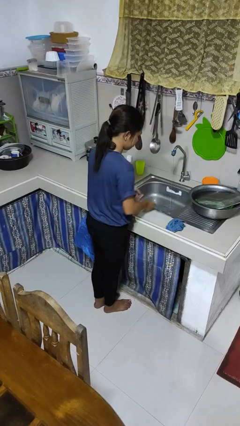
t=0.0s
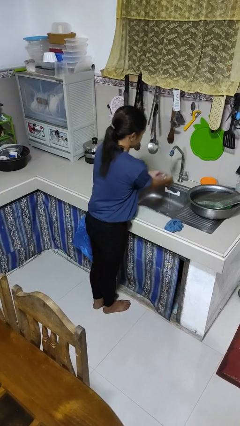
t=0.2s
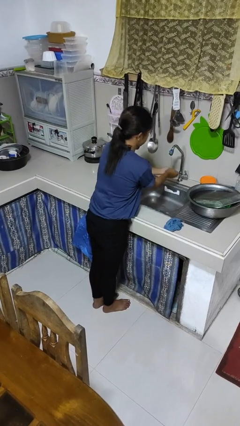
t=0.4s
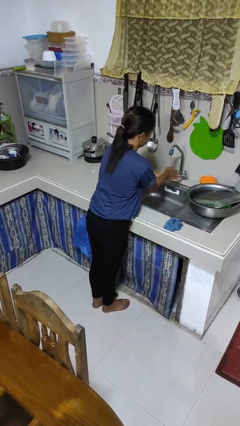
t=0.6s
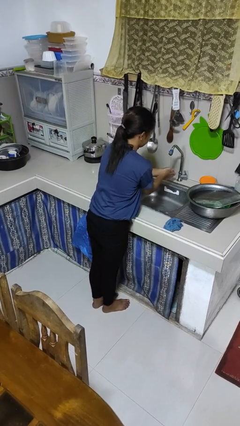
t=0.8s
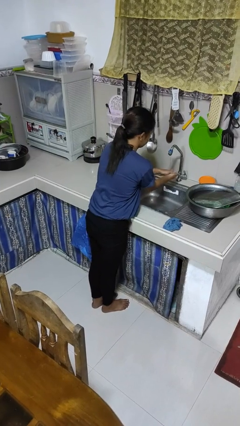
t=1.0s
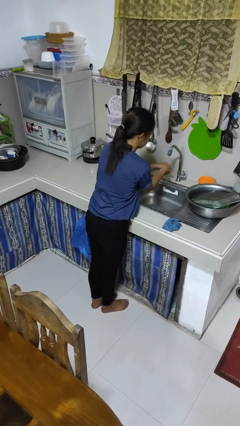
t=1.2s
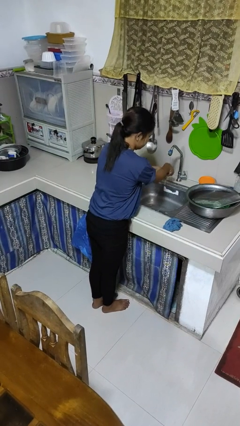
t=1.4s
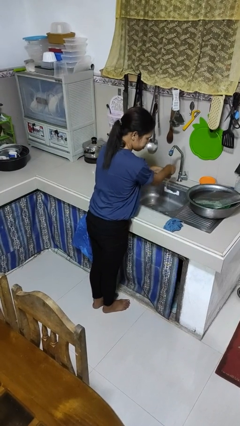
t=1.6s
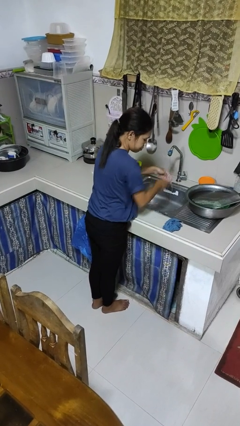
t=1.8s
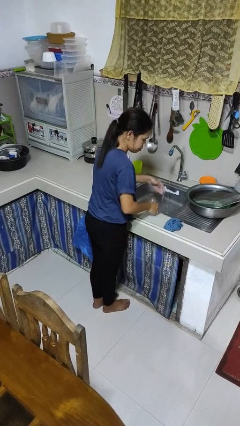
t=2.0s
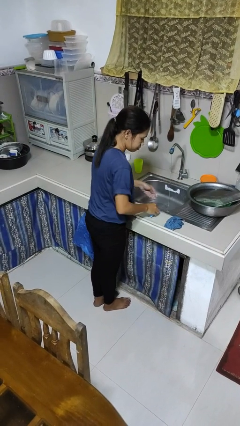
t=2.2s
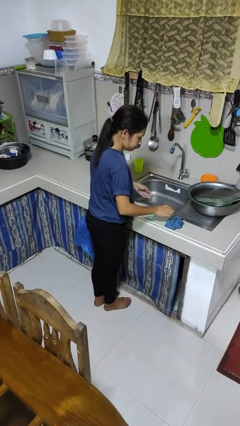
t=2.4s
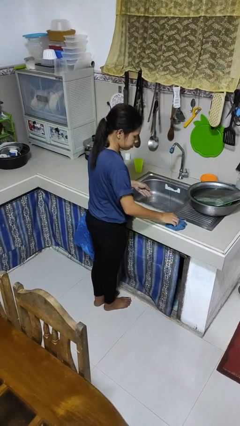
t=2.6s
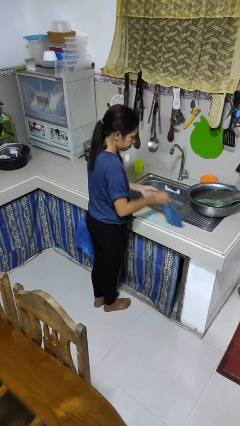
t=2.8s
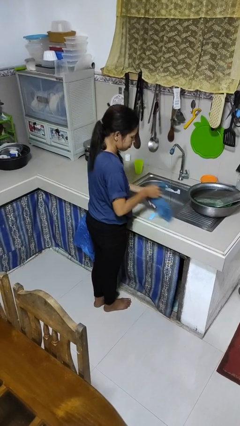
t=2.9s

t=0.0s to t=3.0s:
person washes hands

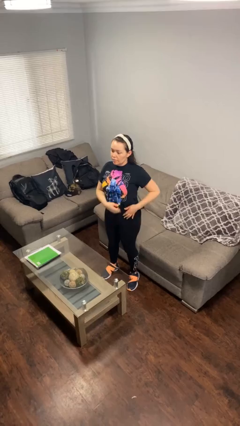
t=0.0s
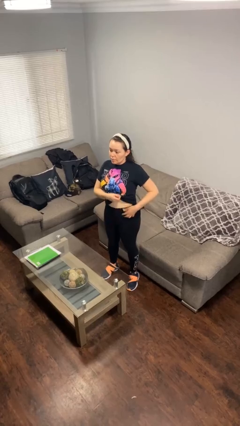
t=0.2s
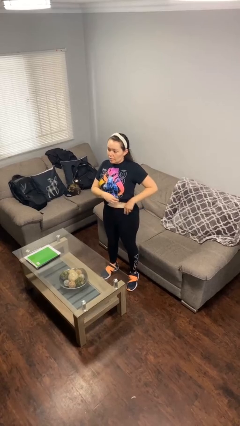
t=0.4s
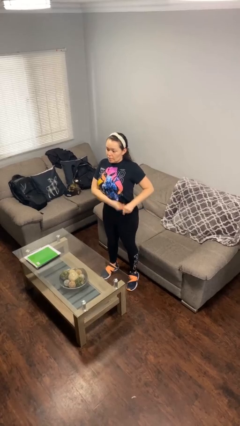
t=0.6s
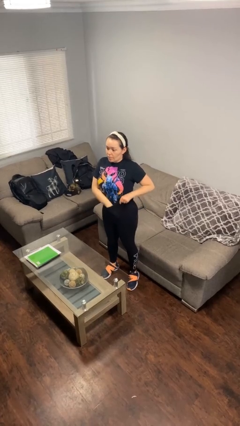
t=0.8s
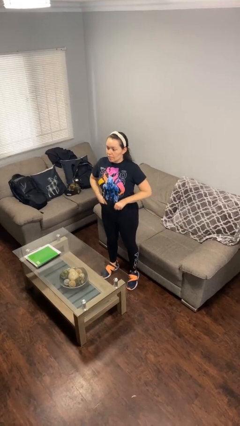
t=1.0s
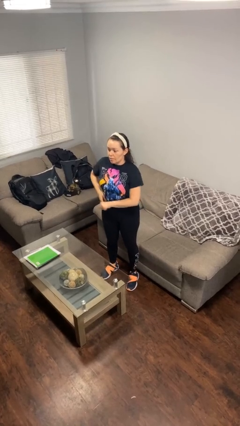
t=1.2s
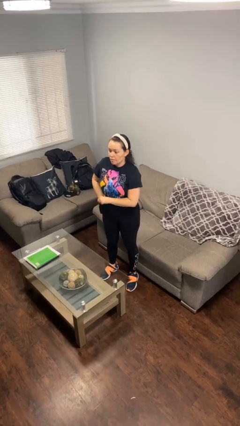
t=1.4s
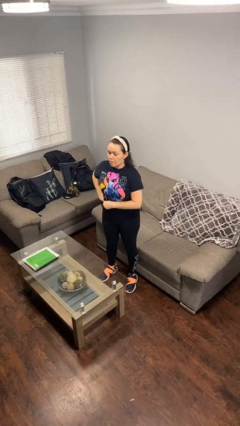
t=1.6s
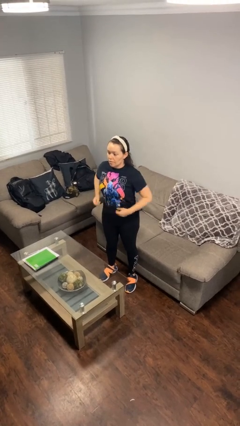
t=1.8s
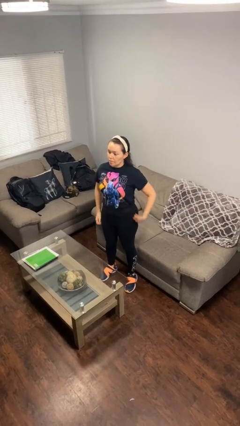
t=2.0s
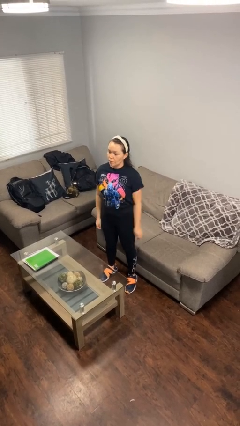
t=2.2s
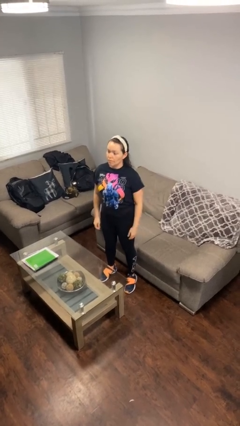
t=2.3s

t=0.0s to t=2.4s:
person tucks in shirt

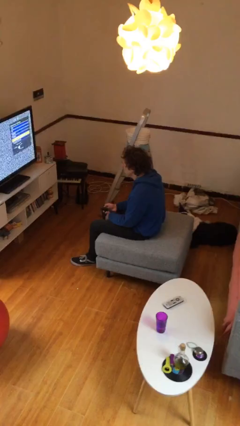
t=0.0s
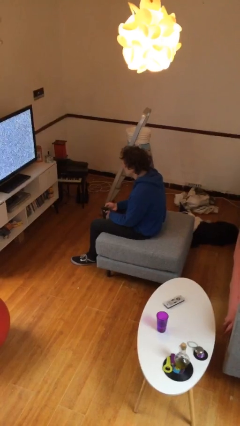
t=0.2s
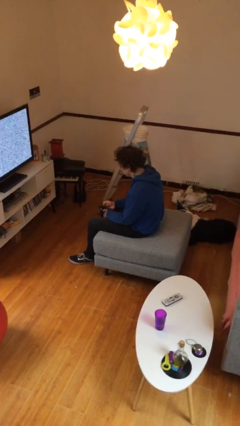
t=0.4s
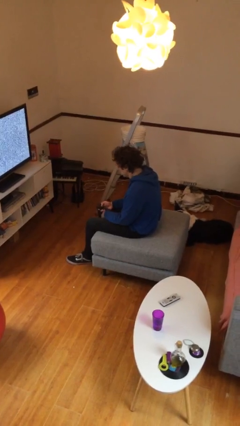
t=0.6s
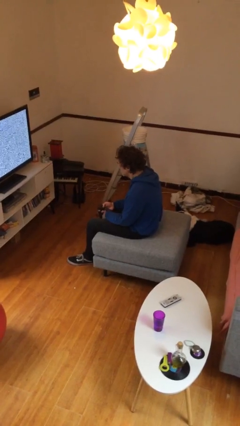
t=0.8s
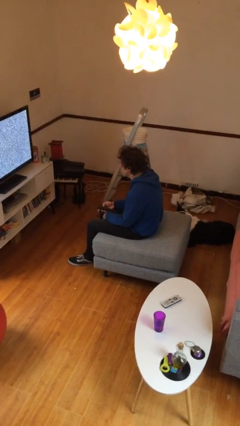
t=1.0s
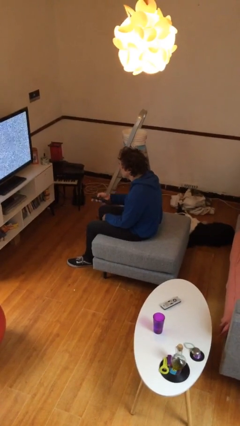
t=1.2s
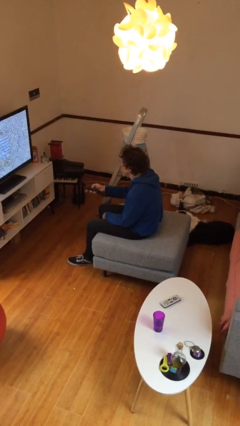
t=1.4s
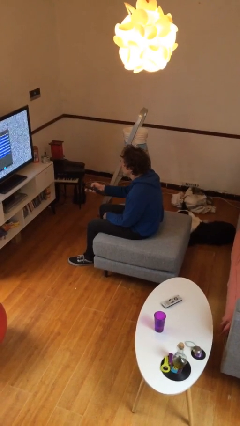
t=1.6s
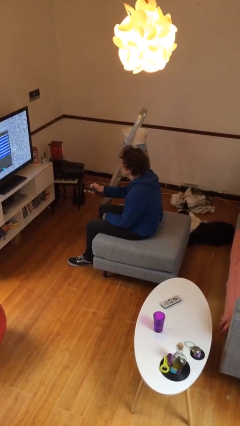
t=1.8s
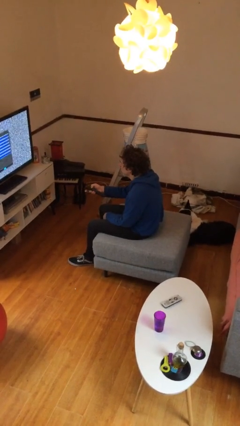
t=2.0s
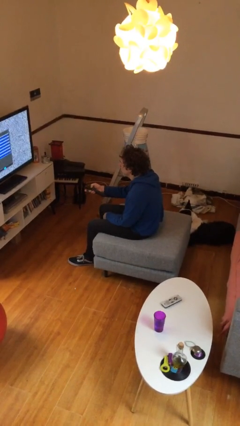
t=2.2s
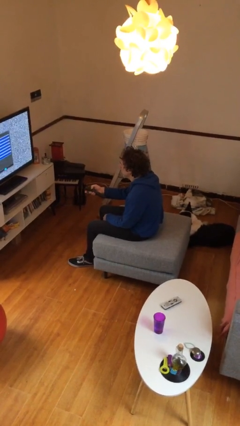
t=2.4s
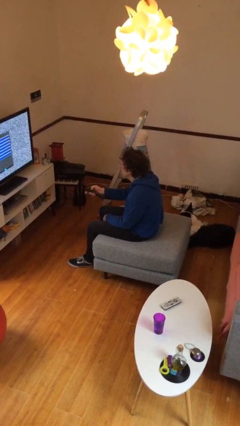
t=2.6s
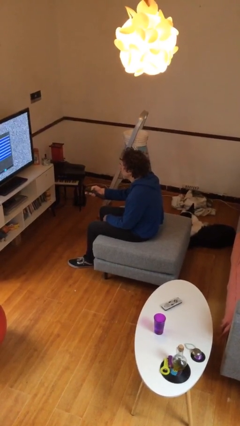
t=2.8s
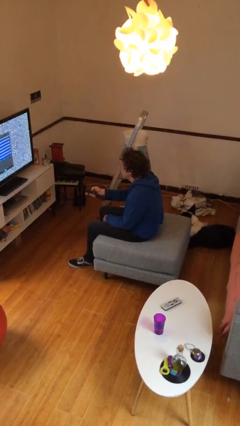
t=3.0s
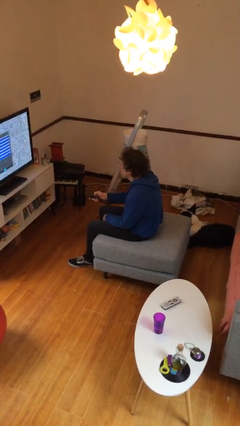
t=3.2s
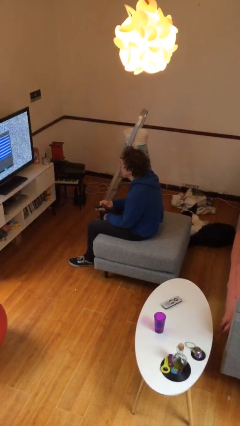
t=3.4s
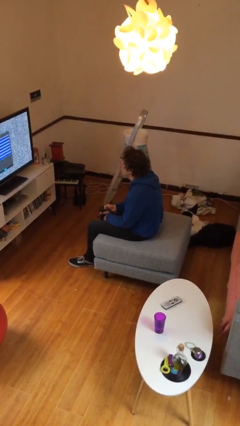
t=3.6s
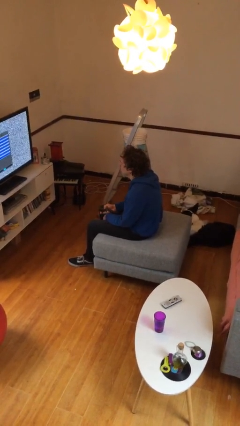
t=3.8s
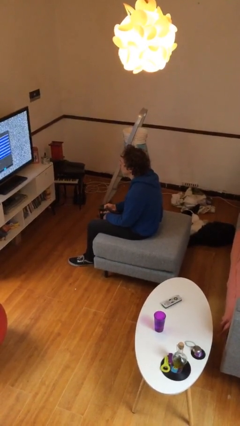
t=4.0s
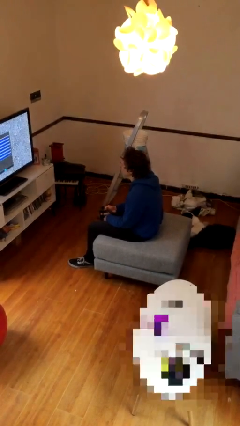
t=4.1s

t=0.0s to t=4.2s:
person uses television remote

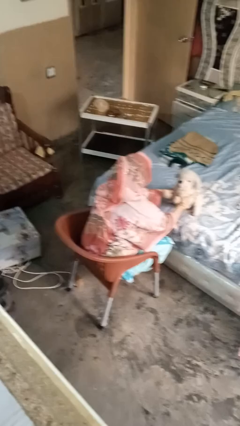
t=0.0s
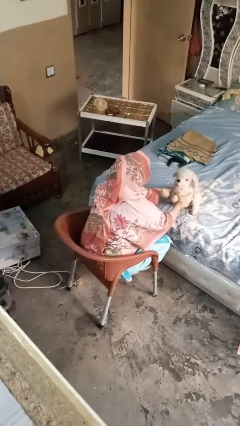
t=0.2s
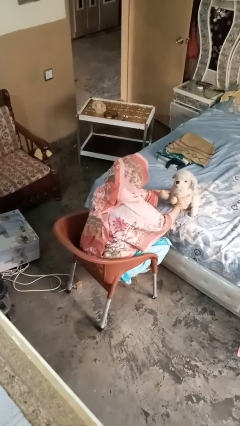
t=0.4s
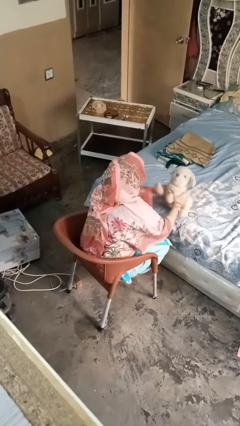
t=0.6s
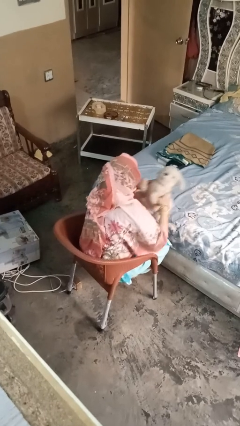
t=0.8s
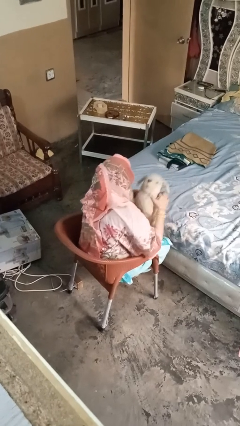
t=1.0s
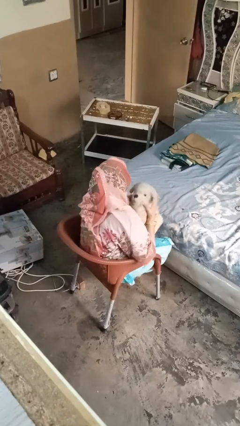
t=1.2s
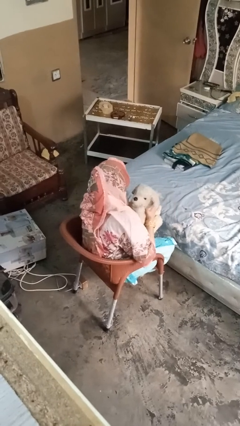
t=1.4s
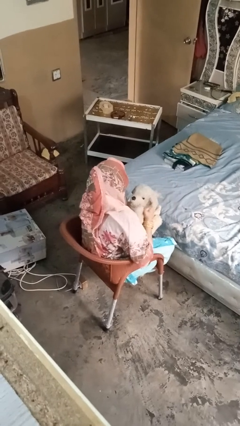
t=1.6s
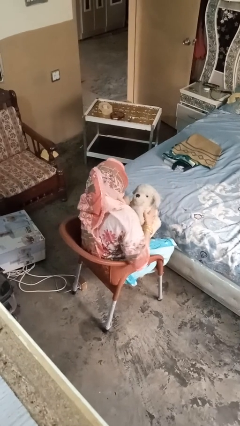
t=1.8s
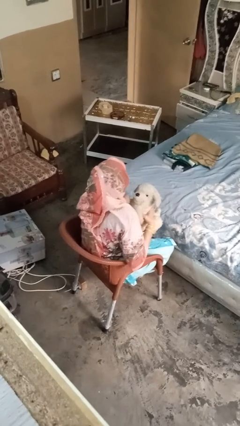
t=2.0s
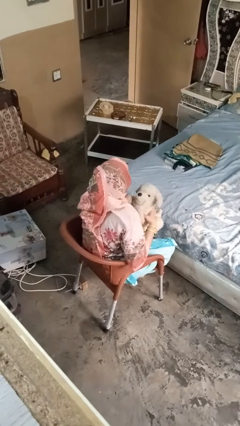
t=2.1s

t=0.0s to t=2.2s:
person hugs stuffed animal

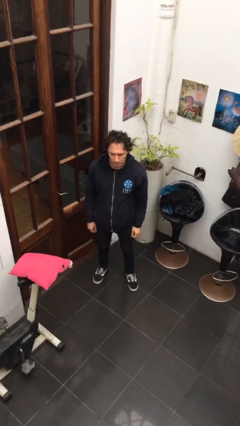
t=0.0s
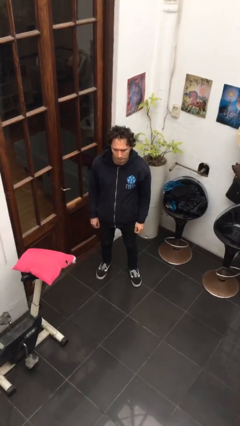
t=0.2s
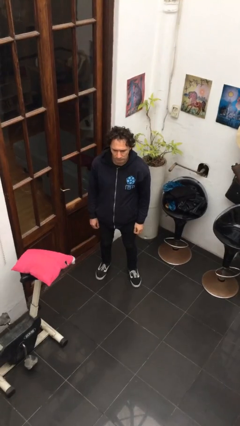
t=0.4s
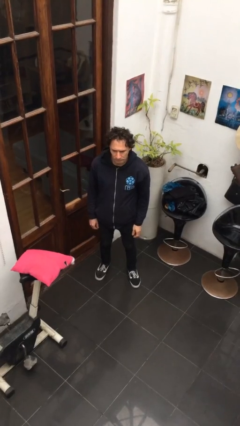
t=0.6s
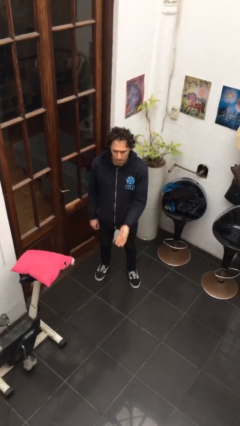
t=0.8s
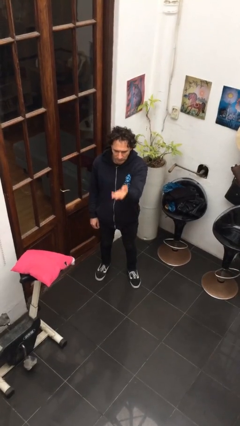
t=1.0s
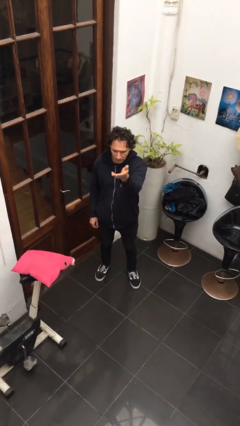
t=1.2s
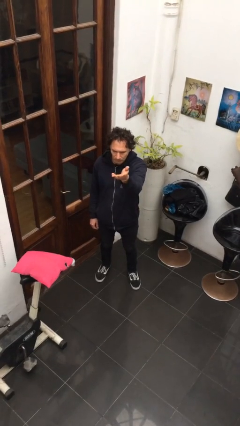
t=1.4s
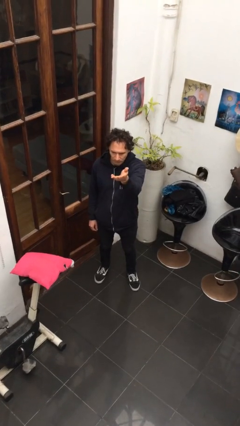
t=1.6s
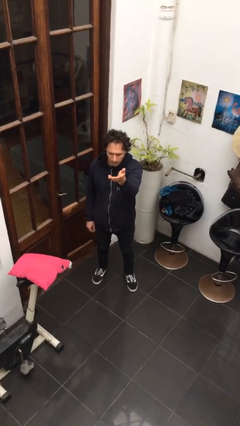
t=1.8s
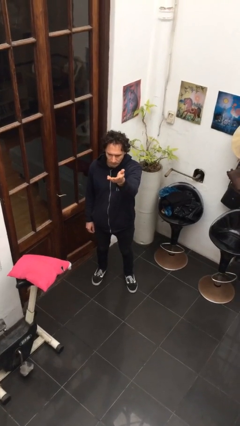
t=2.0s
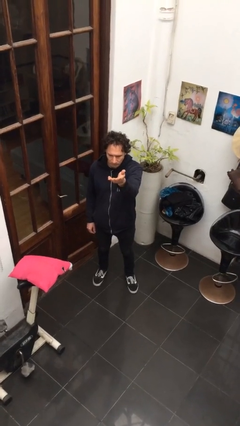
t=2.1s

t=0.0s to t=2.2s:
person gestures swipe up

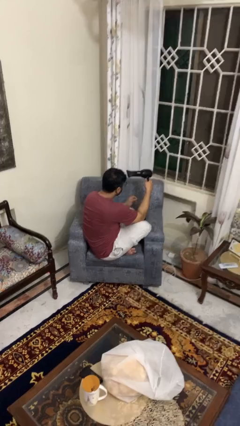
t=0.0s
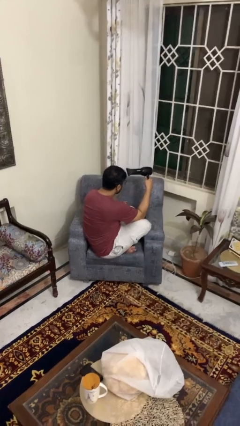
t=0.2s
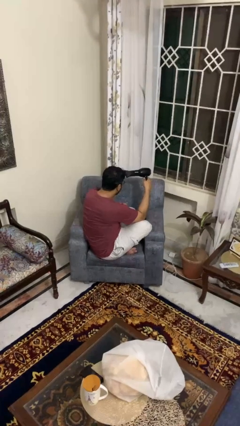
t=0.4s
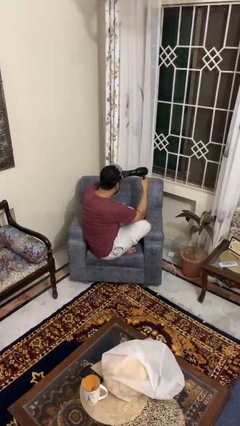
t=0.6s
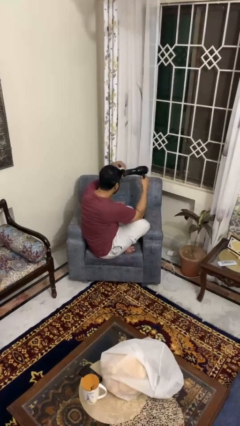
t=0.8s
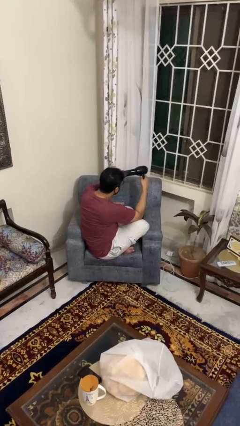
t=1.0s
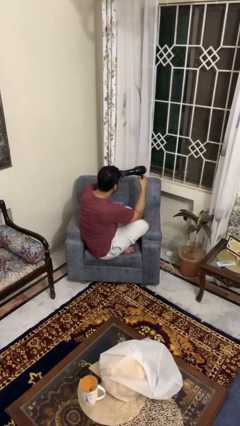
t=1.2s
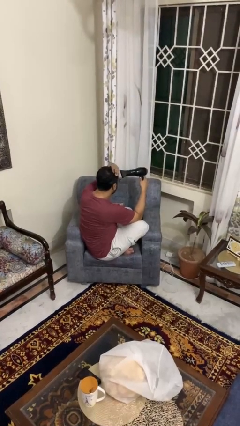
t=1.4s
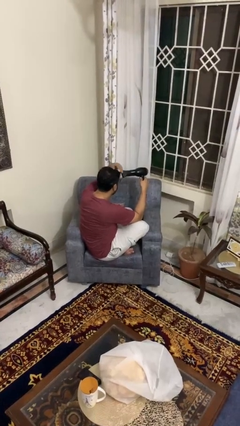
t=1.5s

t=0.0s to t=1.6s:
person dries hair with hairdryer

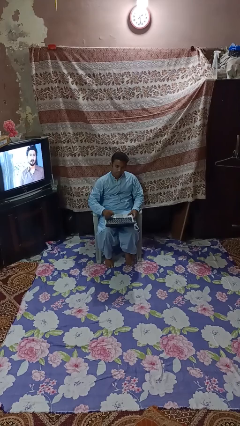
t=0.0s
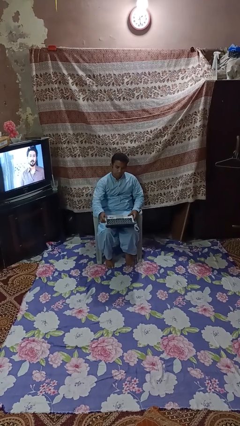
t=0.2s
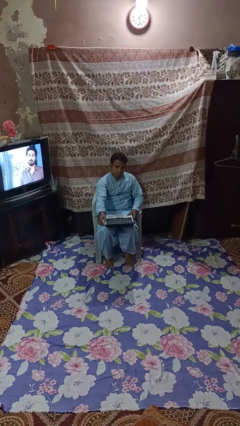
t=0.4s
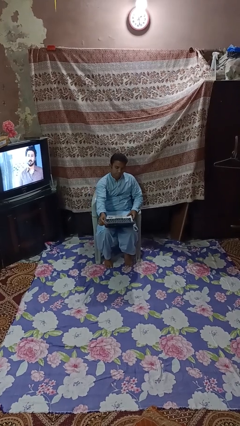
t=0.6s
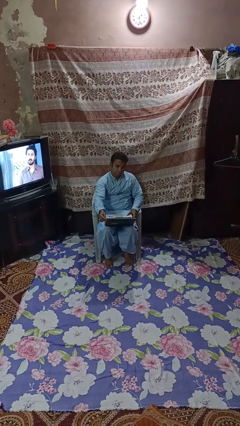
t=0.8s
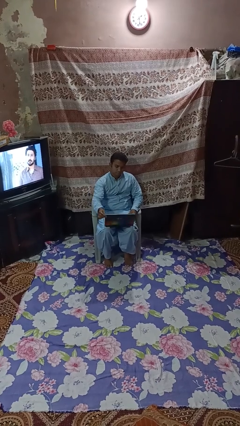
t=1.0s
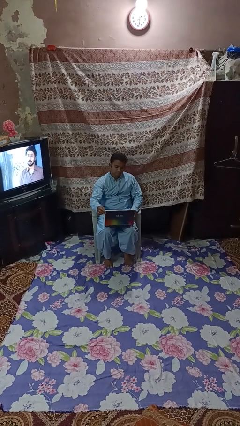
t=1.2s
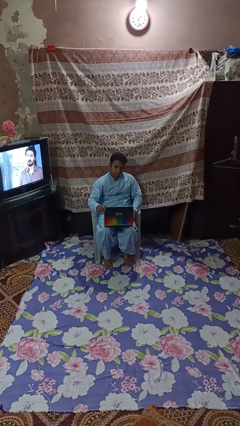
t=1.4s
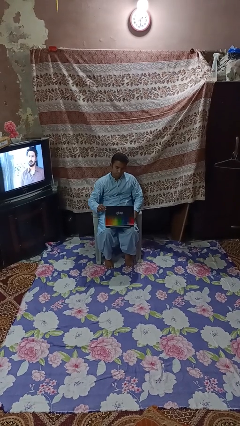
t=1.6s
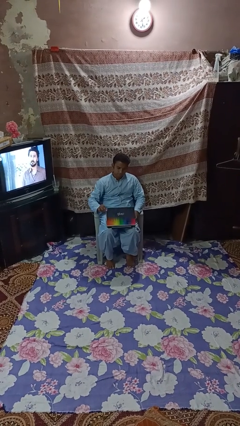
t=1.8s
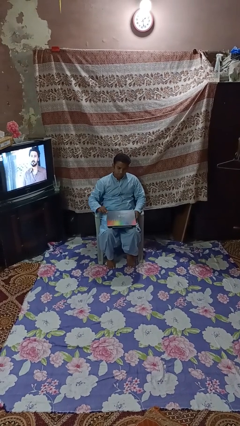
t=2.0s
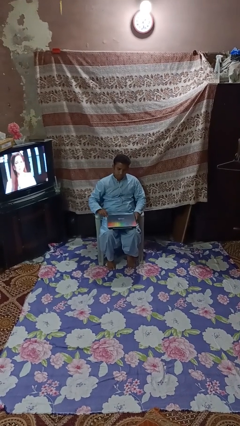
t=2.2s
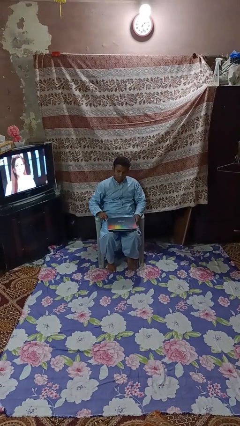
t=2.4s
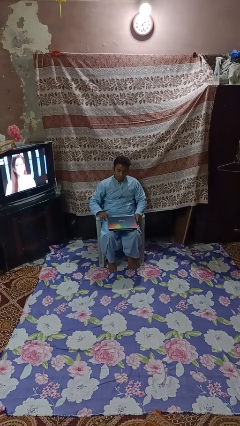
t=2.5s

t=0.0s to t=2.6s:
person closes laptop
